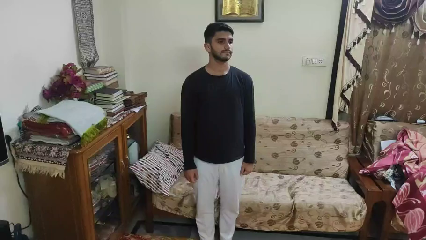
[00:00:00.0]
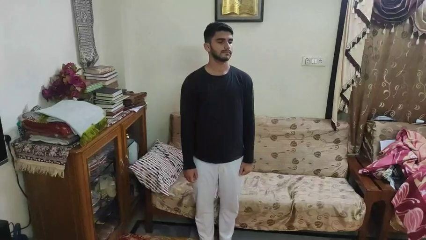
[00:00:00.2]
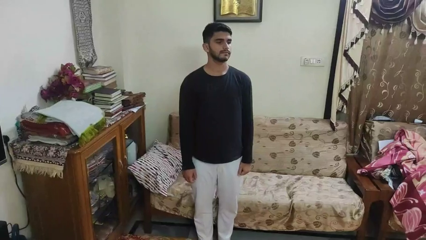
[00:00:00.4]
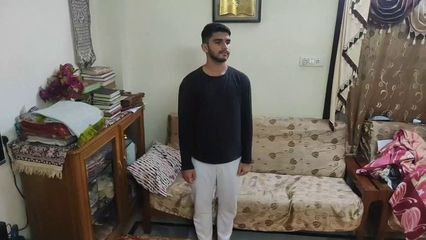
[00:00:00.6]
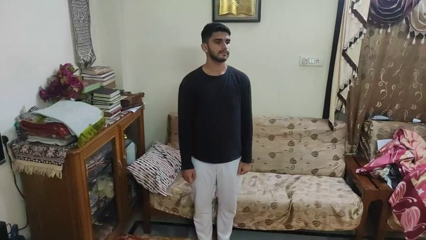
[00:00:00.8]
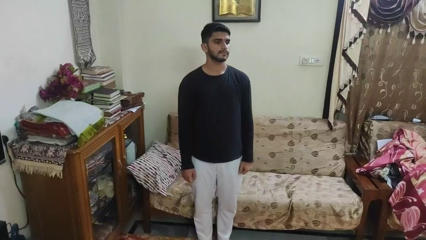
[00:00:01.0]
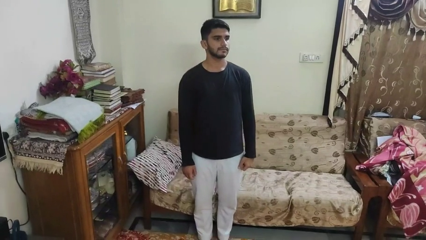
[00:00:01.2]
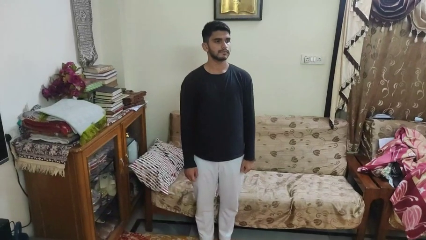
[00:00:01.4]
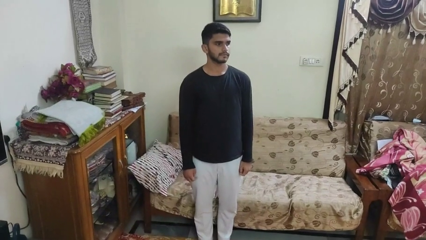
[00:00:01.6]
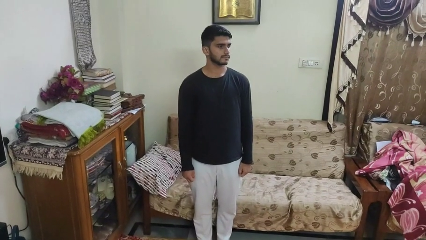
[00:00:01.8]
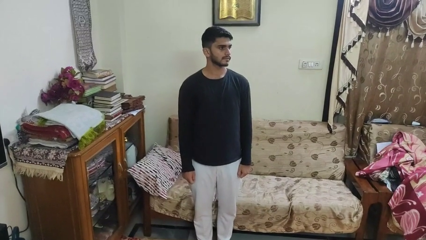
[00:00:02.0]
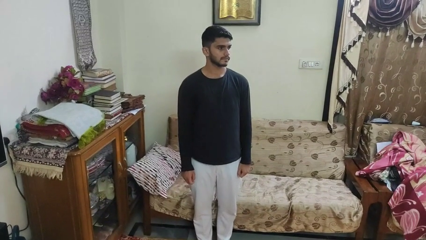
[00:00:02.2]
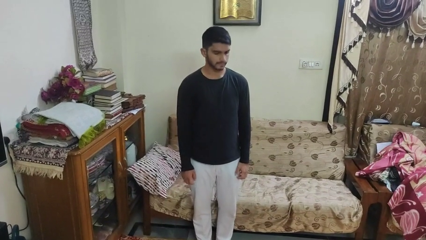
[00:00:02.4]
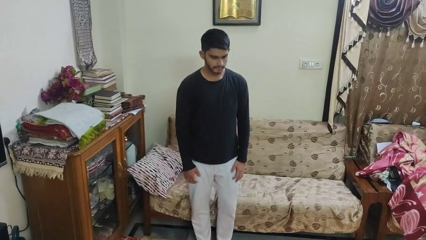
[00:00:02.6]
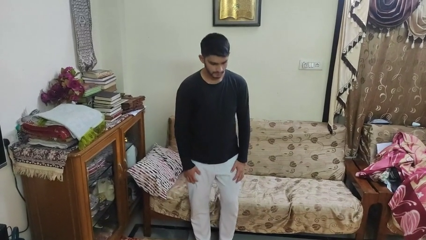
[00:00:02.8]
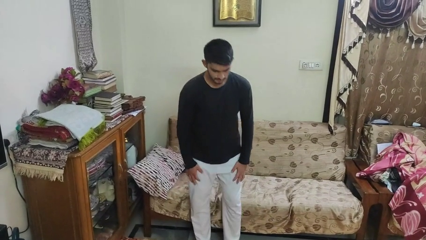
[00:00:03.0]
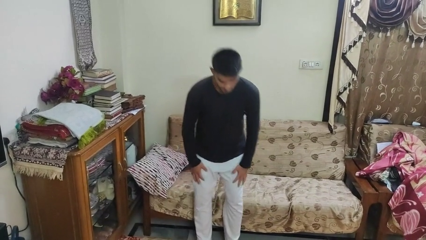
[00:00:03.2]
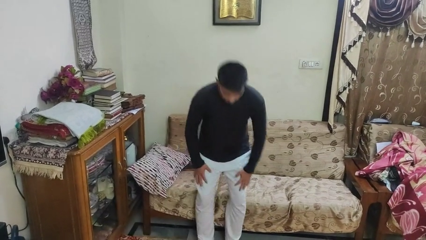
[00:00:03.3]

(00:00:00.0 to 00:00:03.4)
person stands up

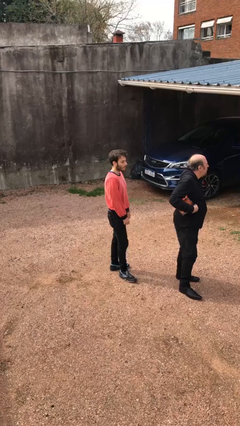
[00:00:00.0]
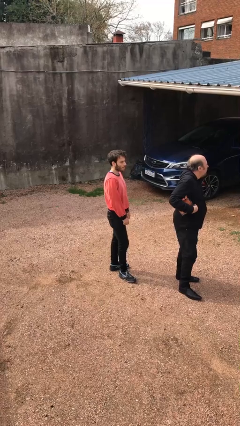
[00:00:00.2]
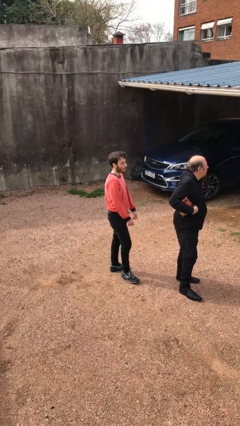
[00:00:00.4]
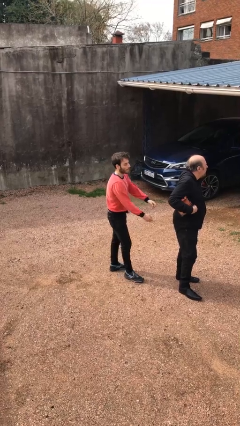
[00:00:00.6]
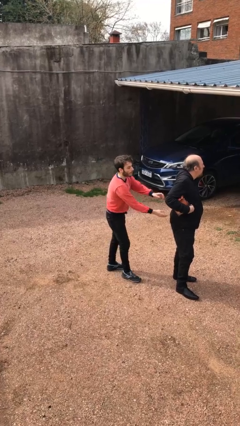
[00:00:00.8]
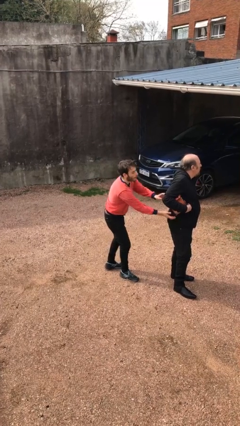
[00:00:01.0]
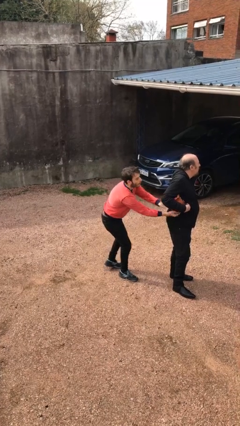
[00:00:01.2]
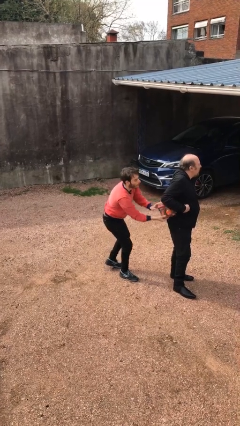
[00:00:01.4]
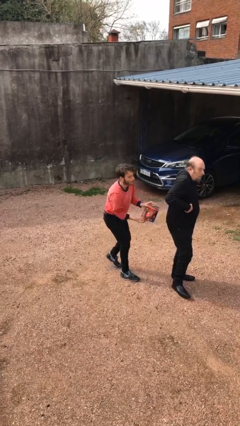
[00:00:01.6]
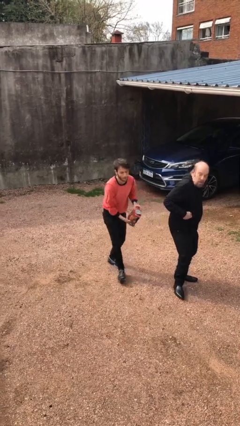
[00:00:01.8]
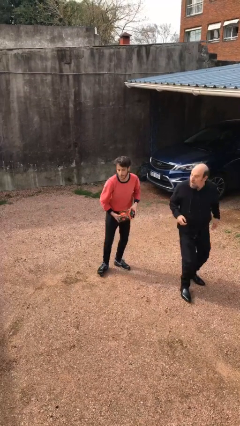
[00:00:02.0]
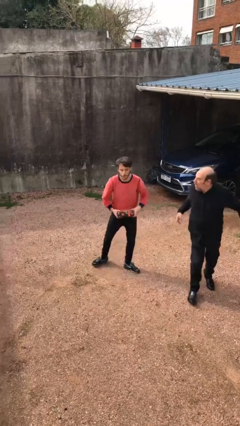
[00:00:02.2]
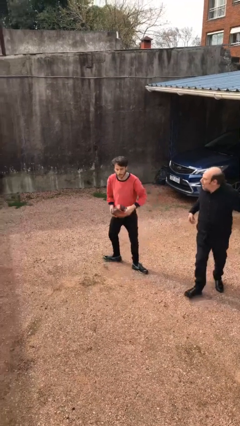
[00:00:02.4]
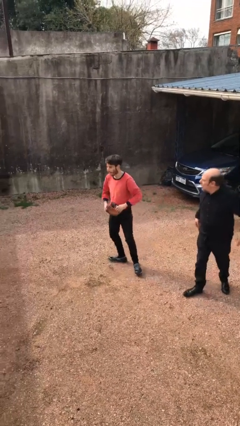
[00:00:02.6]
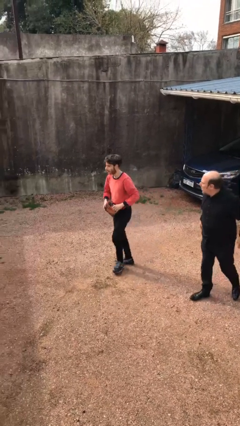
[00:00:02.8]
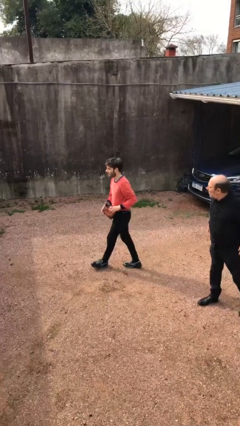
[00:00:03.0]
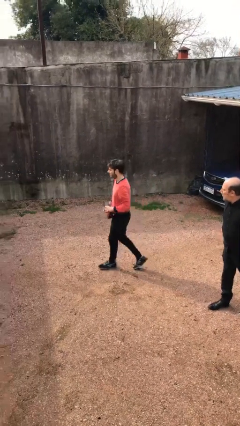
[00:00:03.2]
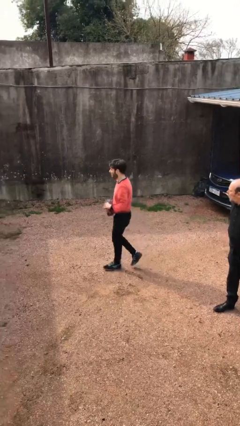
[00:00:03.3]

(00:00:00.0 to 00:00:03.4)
person steals object from person

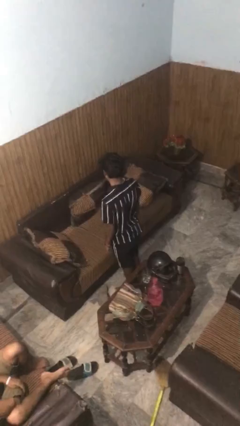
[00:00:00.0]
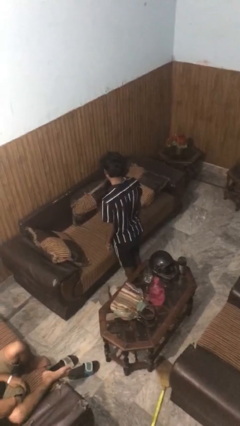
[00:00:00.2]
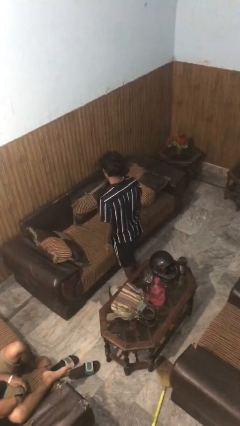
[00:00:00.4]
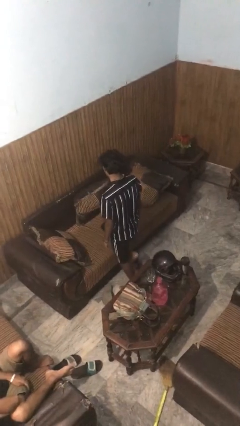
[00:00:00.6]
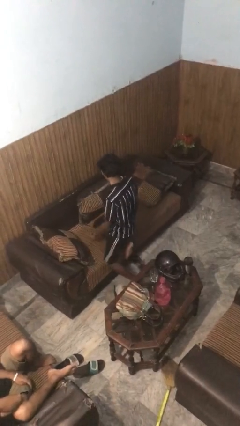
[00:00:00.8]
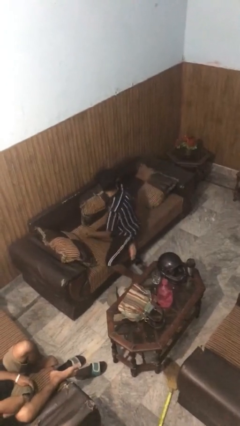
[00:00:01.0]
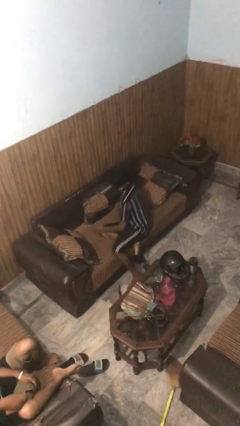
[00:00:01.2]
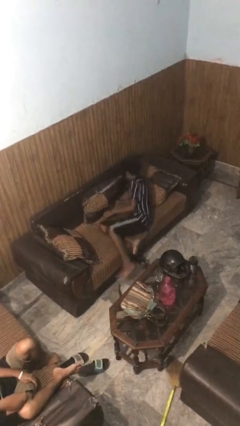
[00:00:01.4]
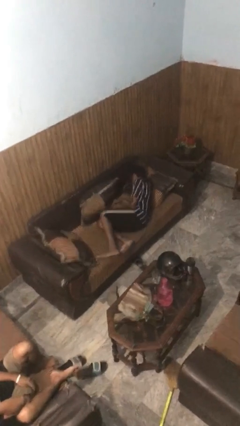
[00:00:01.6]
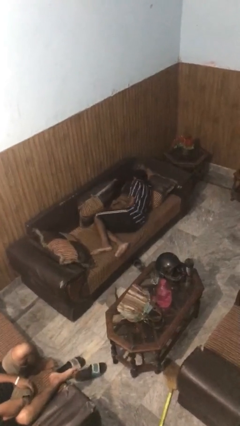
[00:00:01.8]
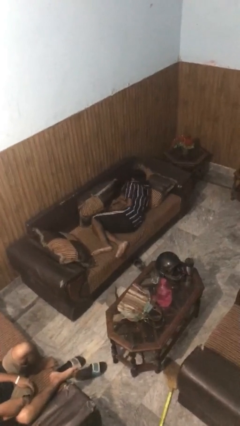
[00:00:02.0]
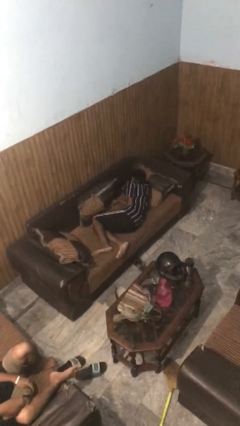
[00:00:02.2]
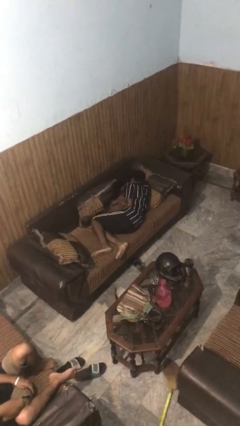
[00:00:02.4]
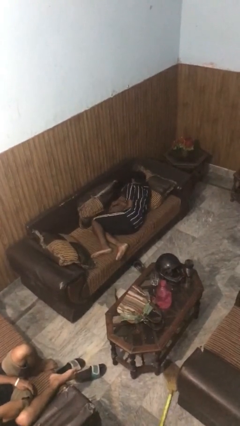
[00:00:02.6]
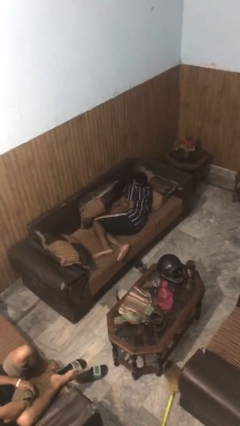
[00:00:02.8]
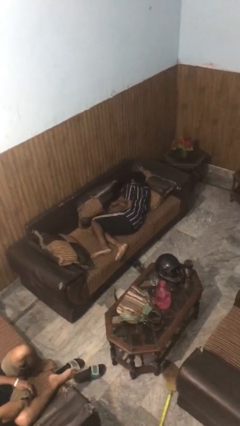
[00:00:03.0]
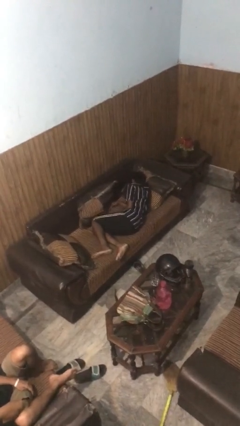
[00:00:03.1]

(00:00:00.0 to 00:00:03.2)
person lies down on couch

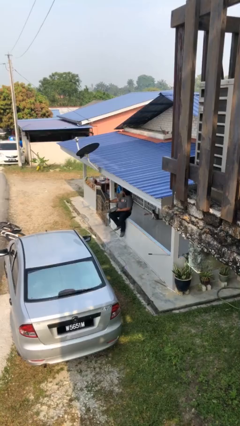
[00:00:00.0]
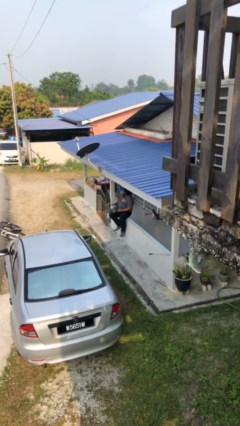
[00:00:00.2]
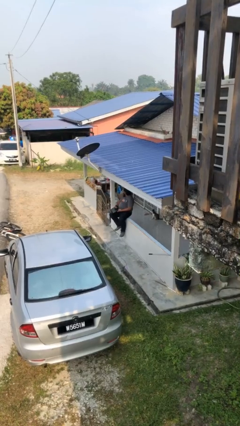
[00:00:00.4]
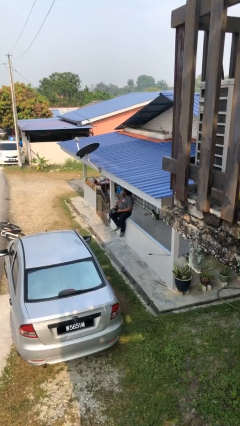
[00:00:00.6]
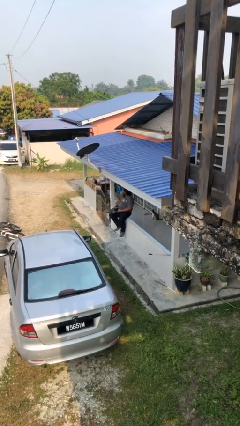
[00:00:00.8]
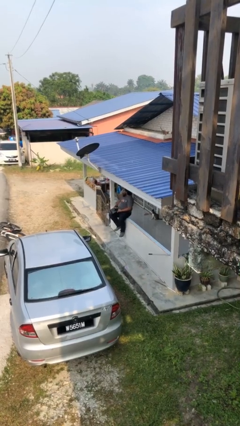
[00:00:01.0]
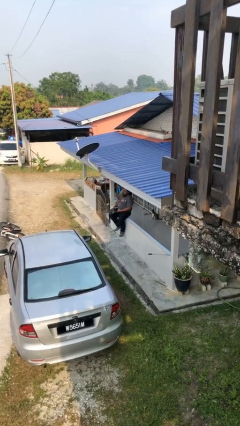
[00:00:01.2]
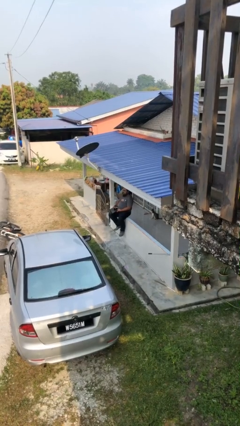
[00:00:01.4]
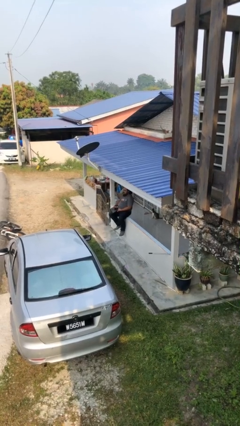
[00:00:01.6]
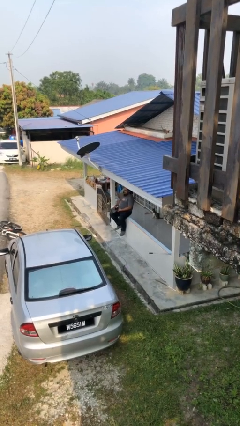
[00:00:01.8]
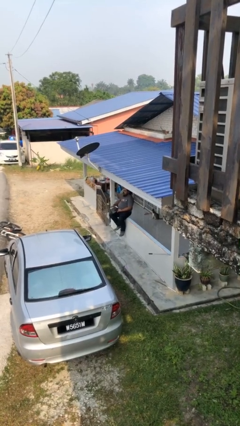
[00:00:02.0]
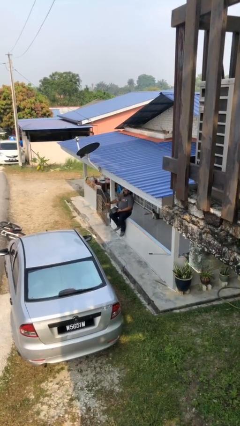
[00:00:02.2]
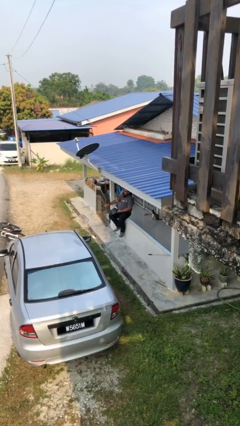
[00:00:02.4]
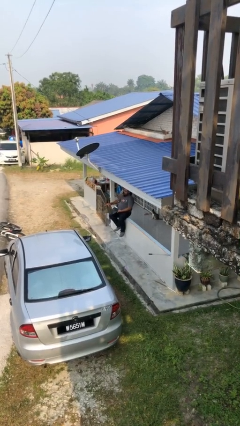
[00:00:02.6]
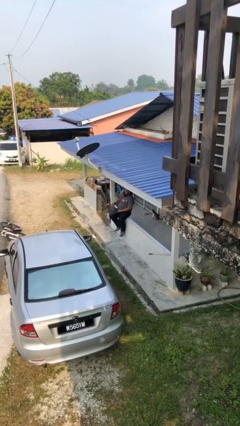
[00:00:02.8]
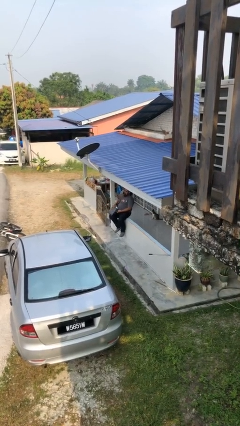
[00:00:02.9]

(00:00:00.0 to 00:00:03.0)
person interacts with laptop

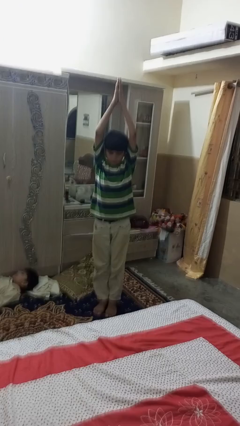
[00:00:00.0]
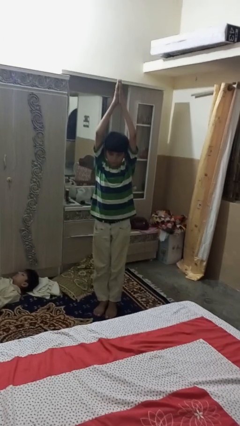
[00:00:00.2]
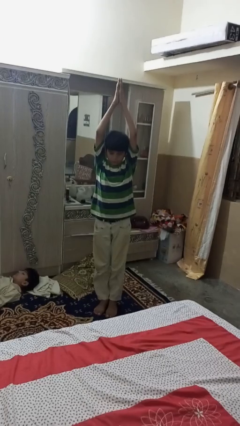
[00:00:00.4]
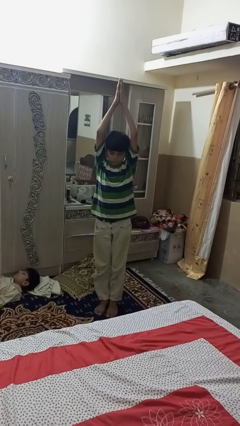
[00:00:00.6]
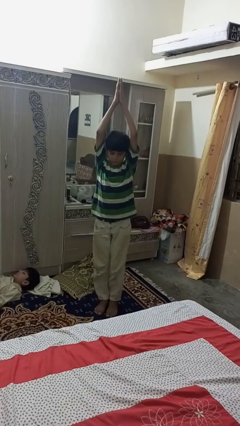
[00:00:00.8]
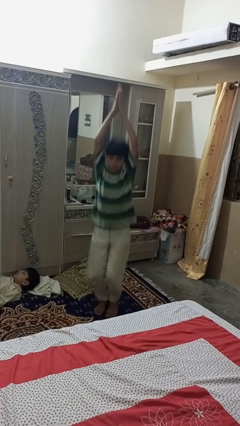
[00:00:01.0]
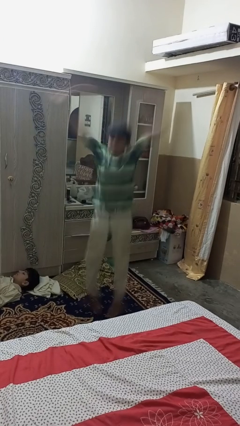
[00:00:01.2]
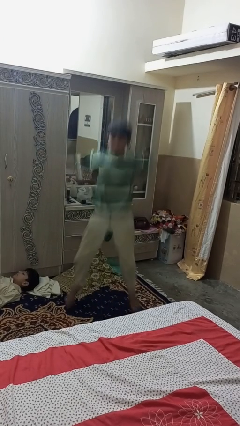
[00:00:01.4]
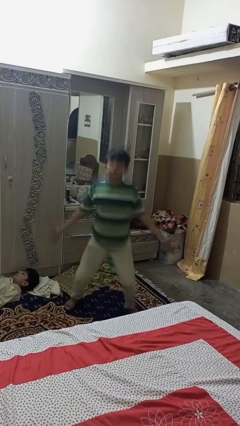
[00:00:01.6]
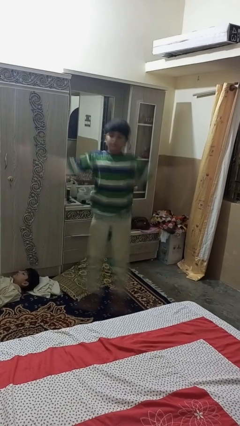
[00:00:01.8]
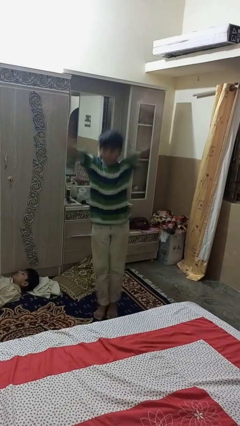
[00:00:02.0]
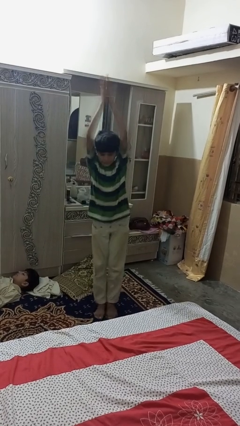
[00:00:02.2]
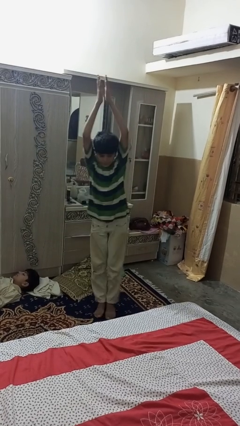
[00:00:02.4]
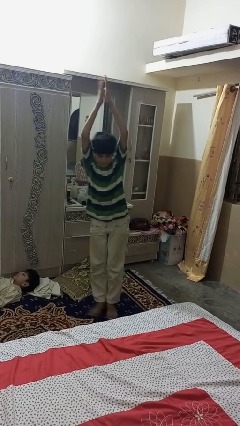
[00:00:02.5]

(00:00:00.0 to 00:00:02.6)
person exercises with jumping jacks

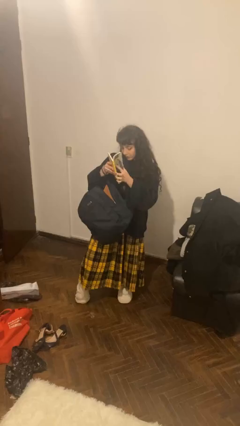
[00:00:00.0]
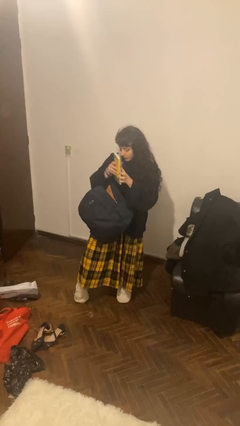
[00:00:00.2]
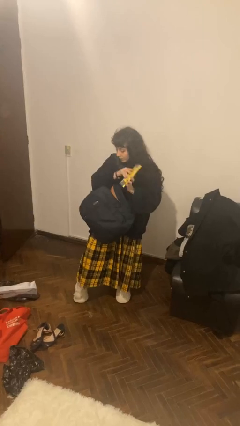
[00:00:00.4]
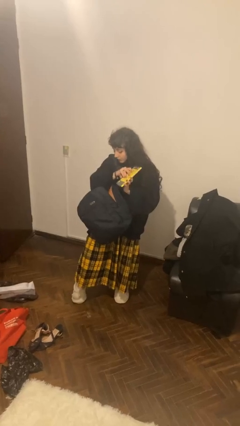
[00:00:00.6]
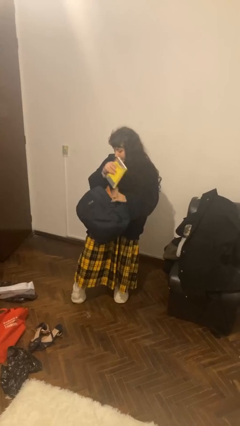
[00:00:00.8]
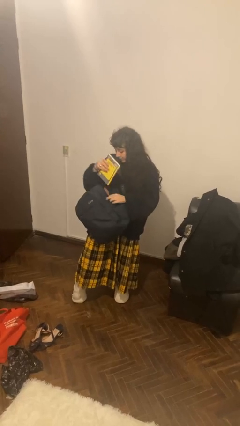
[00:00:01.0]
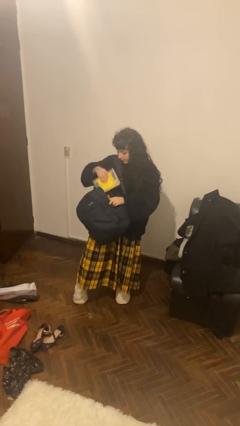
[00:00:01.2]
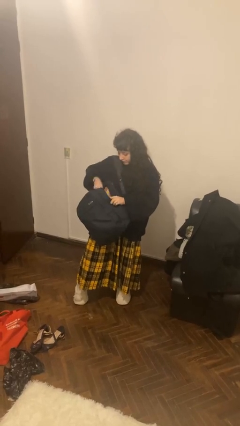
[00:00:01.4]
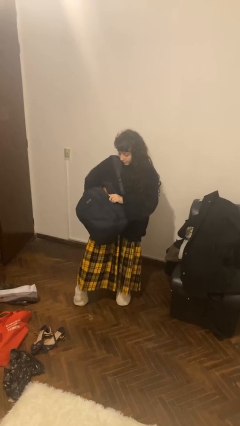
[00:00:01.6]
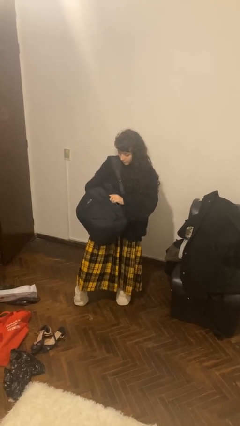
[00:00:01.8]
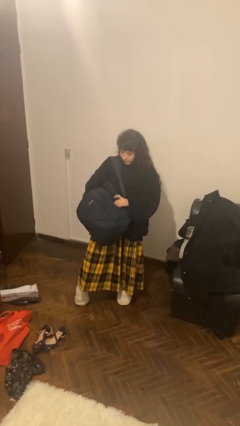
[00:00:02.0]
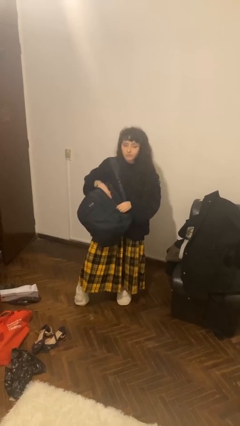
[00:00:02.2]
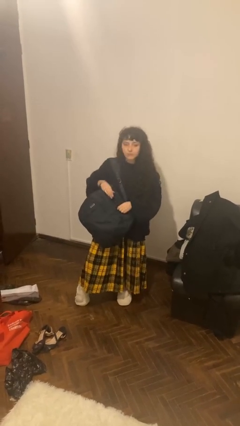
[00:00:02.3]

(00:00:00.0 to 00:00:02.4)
person puts object into backpack
